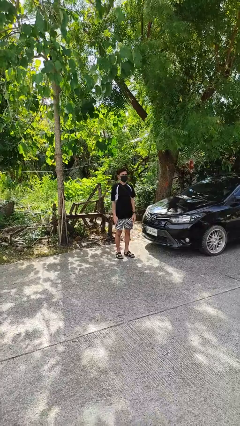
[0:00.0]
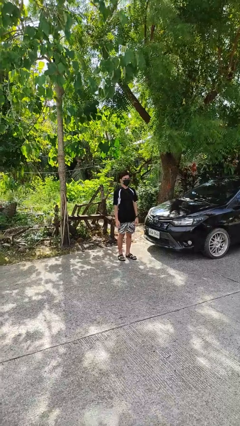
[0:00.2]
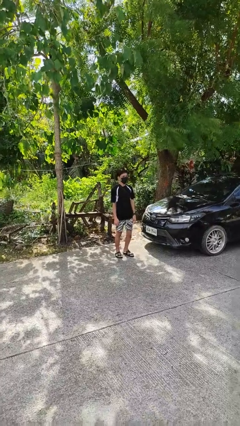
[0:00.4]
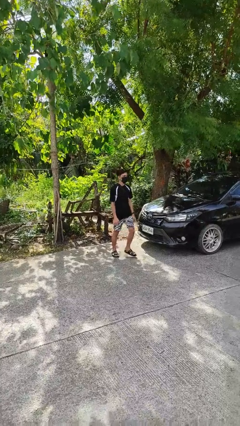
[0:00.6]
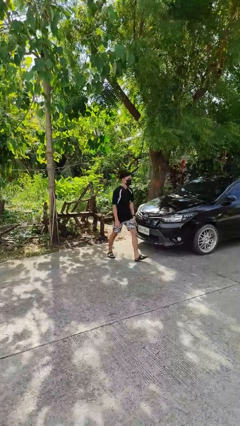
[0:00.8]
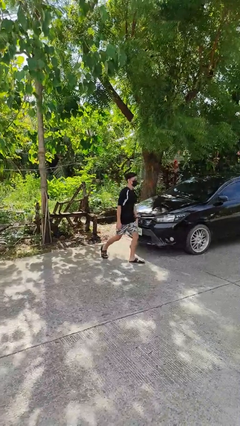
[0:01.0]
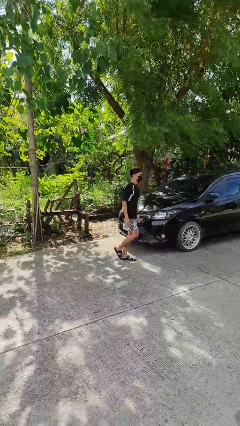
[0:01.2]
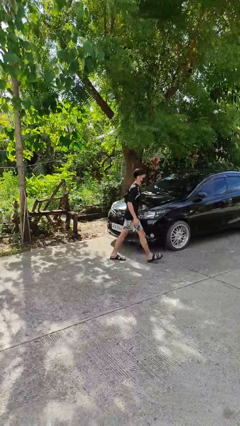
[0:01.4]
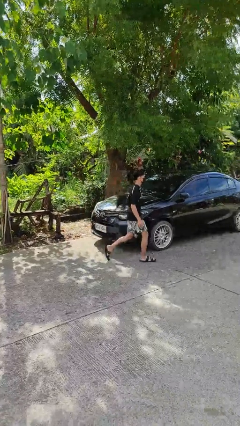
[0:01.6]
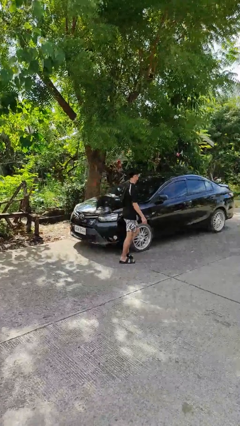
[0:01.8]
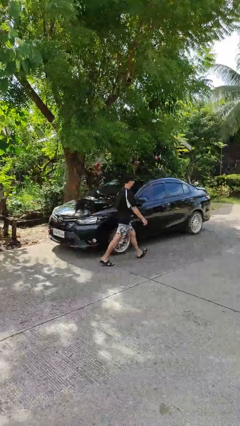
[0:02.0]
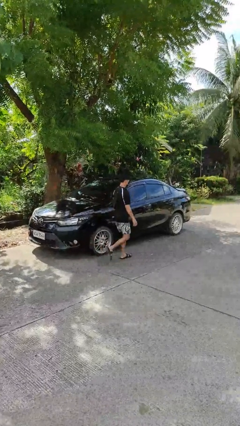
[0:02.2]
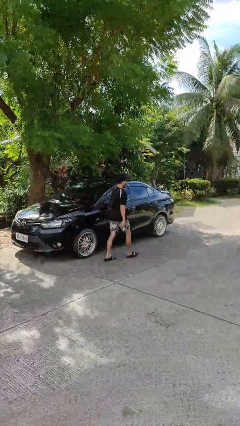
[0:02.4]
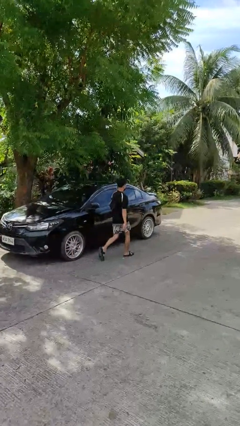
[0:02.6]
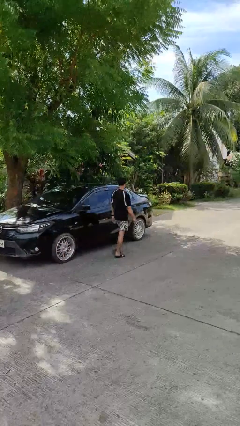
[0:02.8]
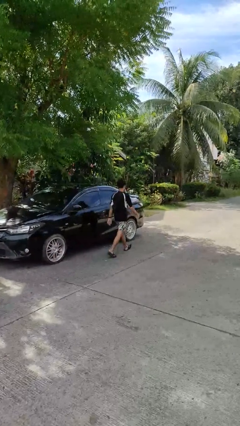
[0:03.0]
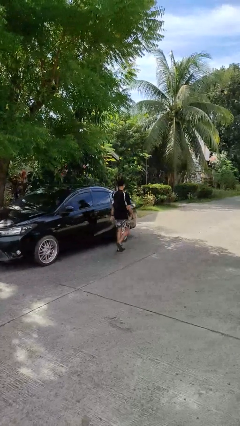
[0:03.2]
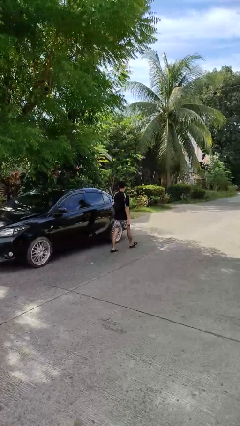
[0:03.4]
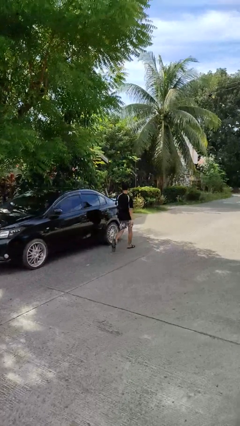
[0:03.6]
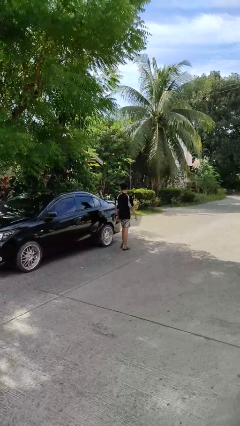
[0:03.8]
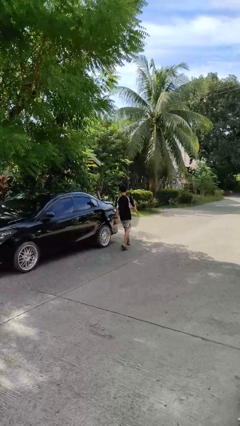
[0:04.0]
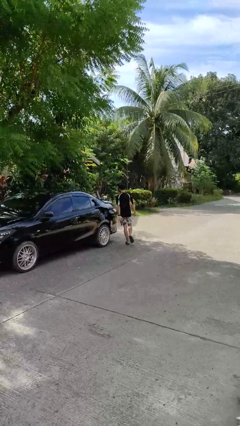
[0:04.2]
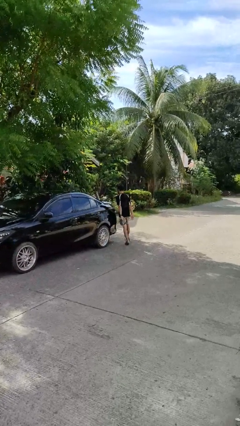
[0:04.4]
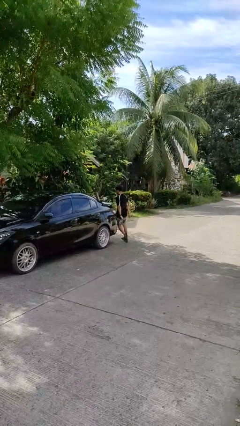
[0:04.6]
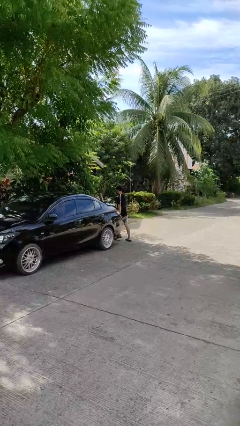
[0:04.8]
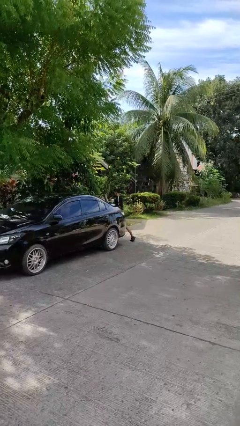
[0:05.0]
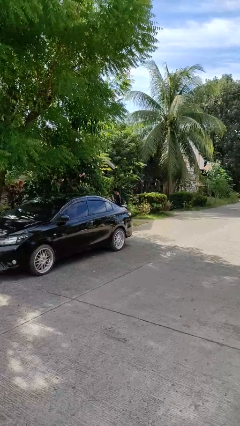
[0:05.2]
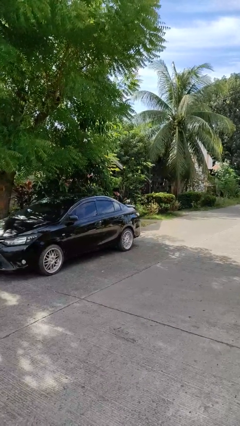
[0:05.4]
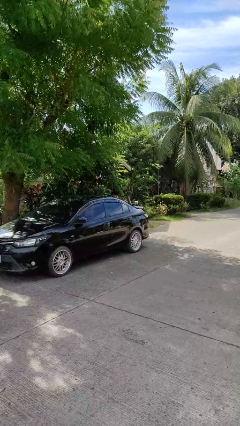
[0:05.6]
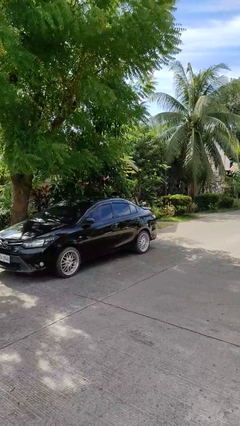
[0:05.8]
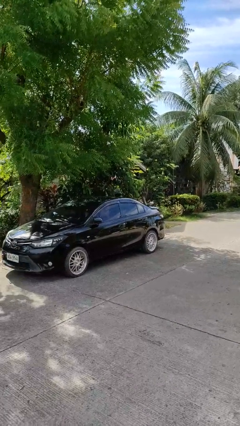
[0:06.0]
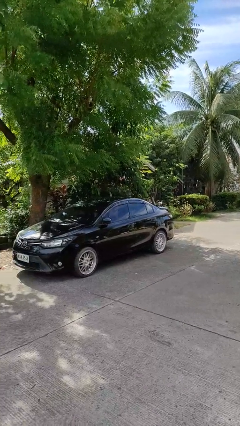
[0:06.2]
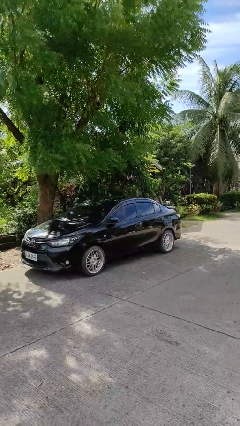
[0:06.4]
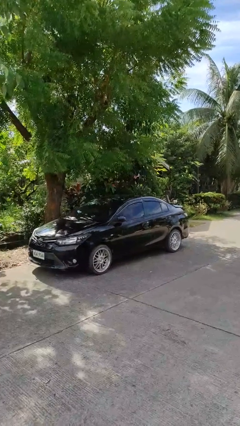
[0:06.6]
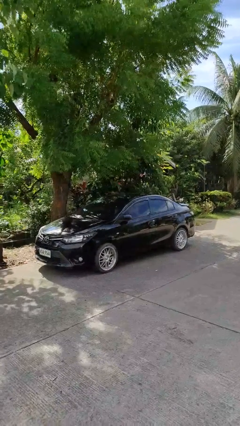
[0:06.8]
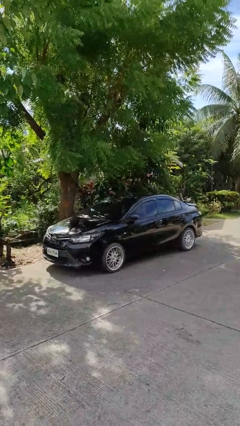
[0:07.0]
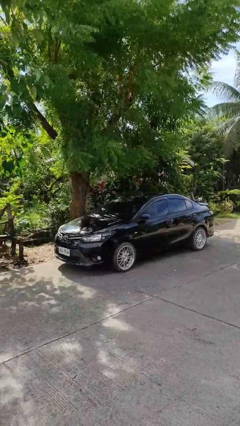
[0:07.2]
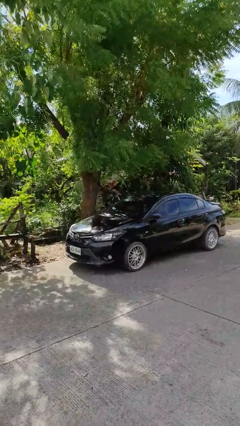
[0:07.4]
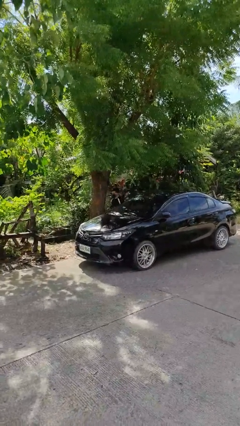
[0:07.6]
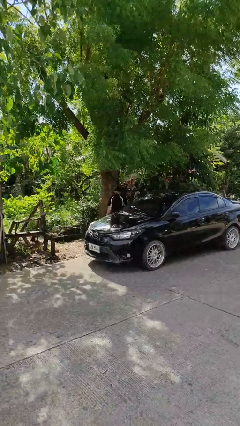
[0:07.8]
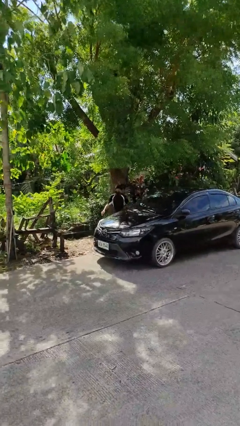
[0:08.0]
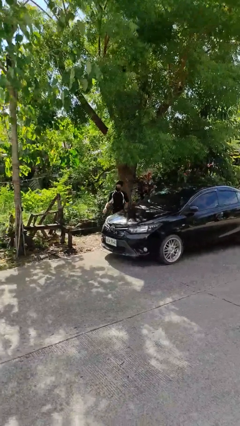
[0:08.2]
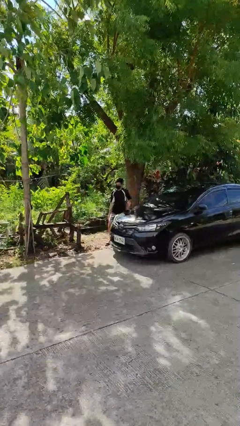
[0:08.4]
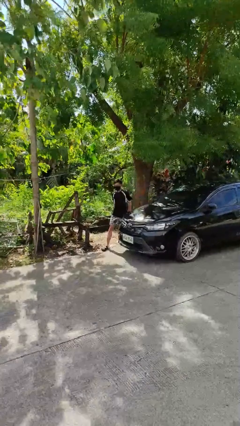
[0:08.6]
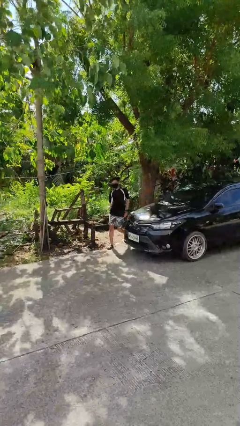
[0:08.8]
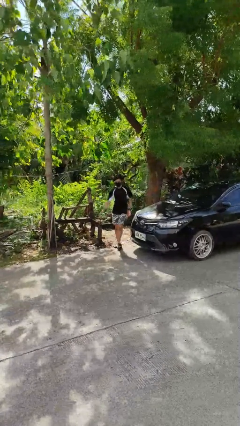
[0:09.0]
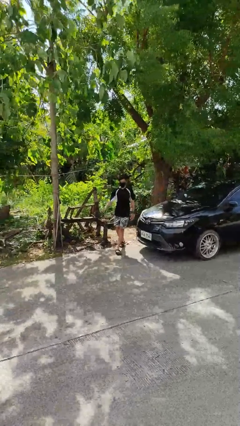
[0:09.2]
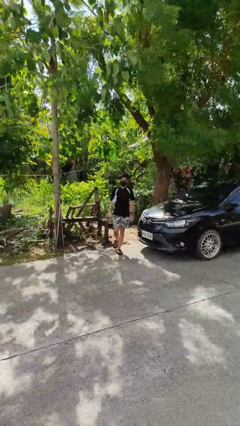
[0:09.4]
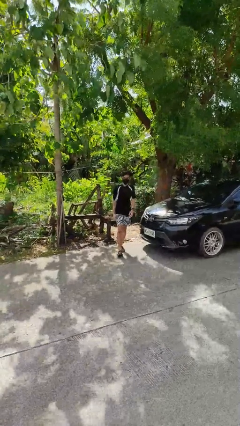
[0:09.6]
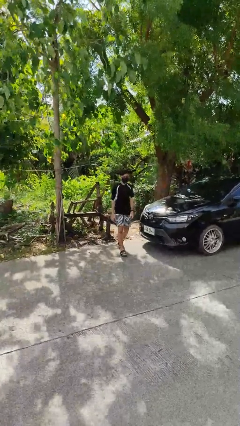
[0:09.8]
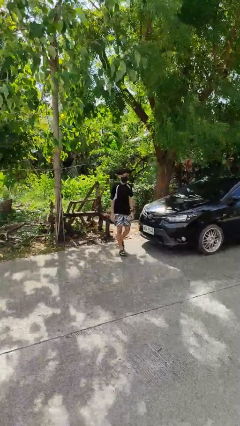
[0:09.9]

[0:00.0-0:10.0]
person walks around car

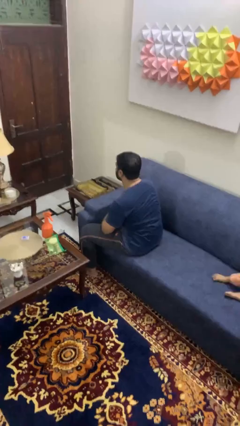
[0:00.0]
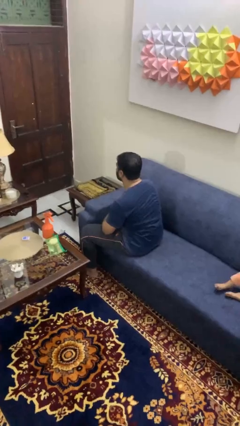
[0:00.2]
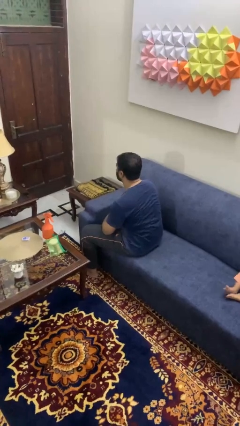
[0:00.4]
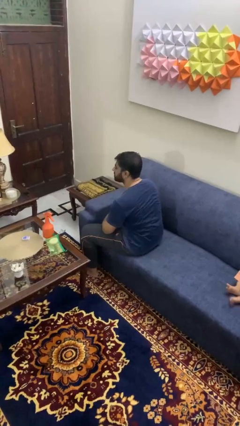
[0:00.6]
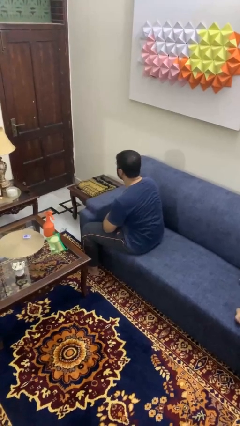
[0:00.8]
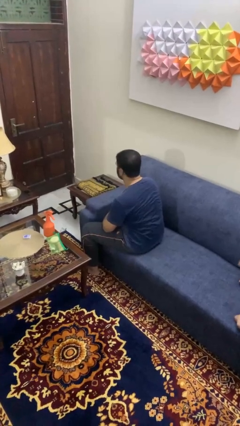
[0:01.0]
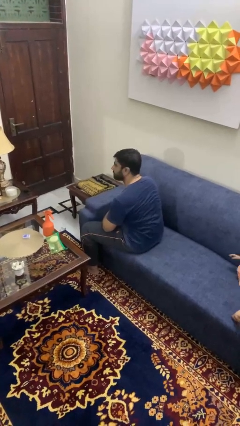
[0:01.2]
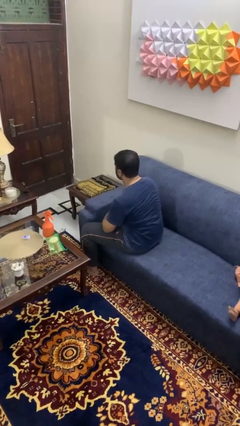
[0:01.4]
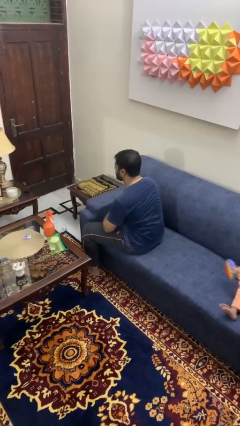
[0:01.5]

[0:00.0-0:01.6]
person shakes head

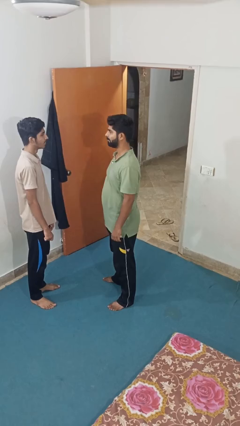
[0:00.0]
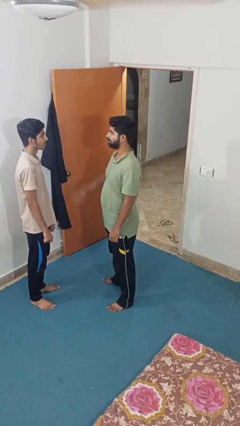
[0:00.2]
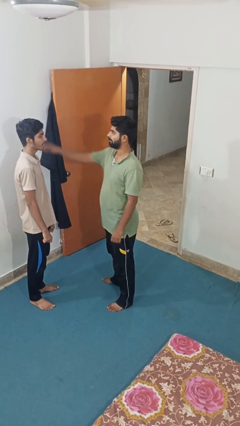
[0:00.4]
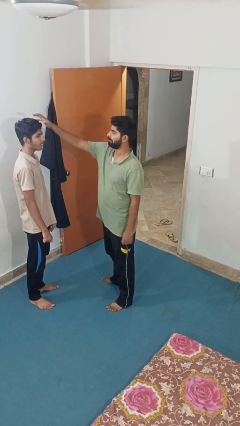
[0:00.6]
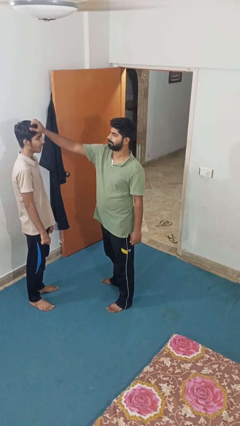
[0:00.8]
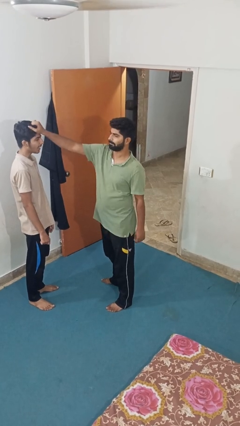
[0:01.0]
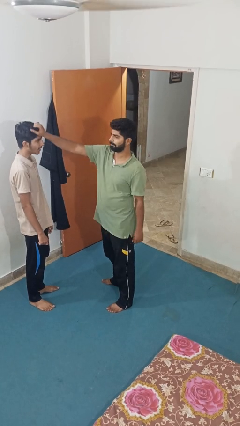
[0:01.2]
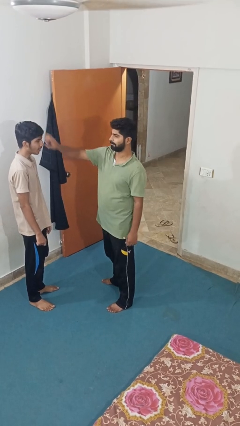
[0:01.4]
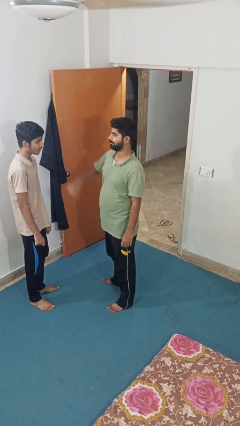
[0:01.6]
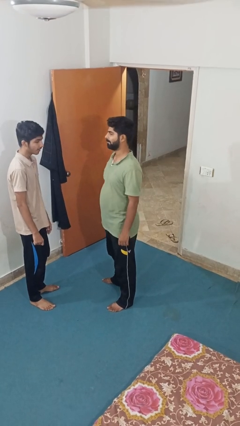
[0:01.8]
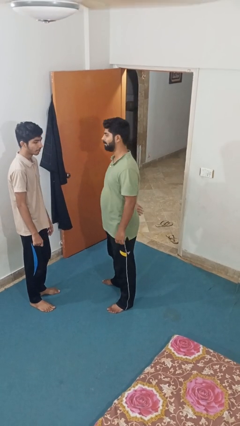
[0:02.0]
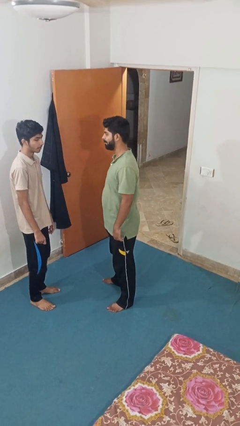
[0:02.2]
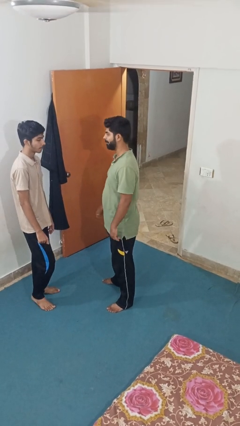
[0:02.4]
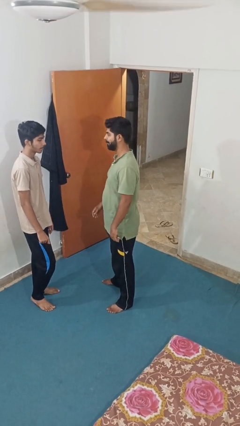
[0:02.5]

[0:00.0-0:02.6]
person grabs person by hair

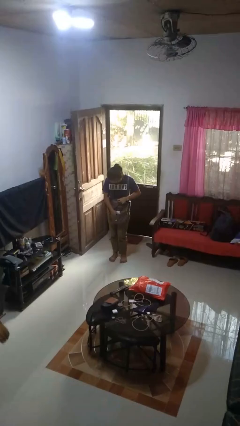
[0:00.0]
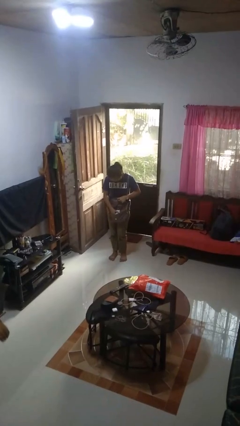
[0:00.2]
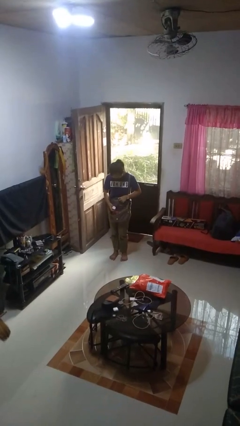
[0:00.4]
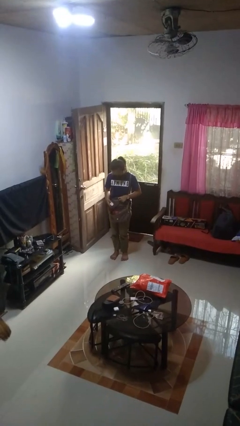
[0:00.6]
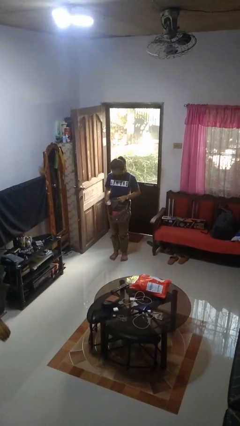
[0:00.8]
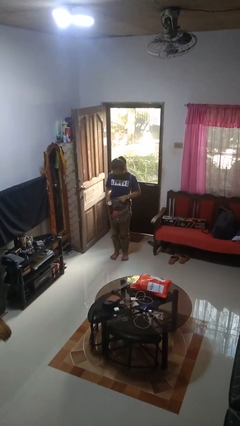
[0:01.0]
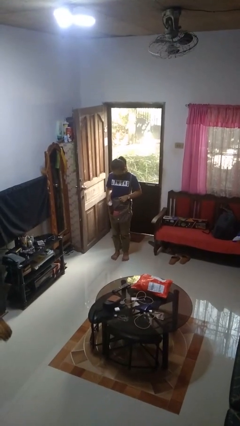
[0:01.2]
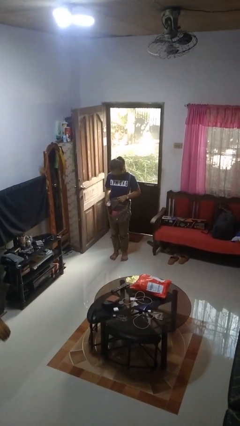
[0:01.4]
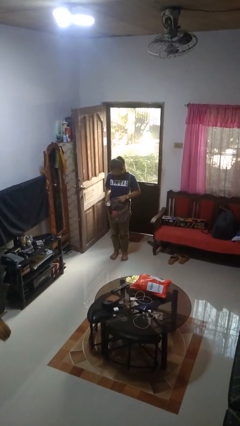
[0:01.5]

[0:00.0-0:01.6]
person takes object from purse

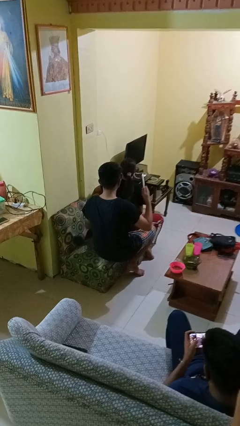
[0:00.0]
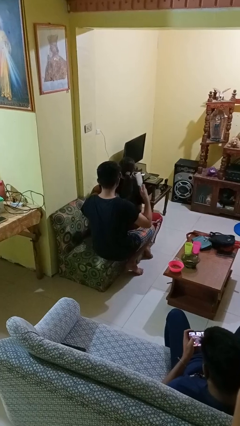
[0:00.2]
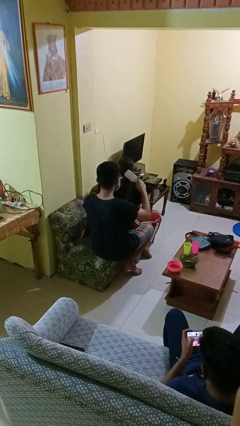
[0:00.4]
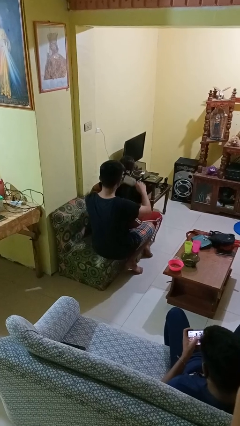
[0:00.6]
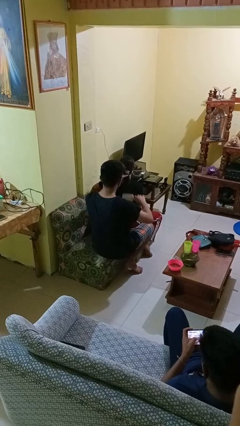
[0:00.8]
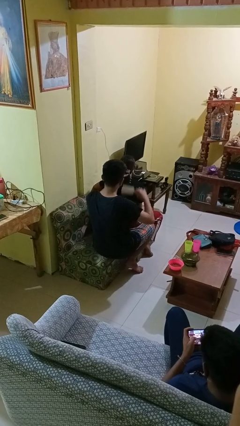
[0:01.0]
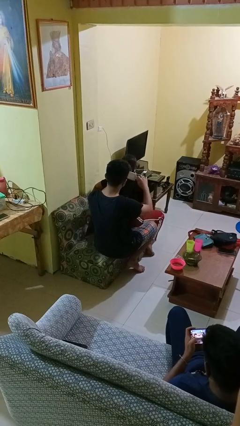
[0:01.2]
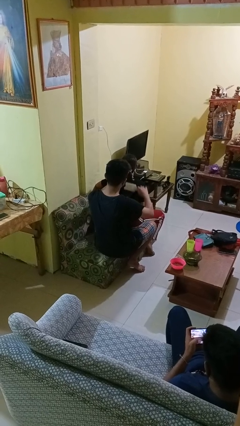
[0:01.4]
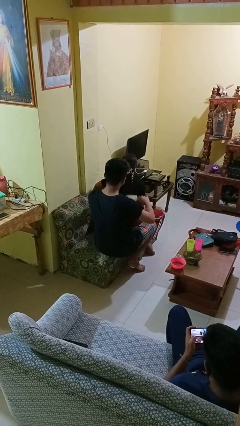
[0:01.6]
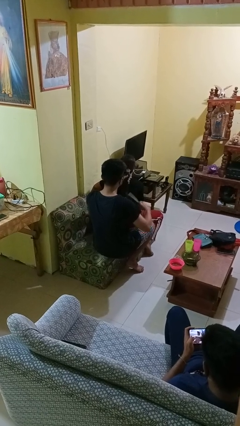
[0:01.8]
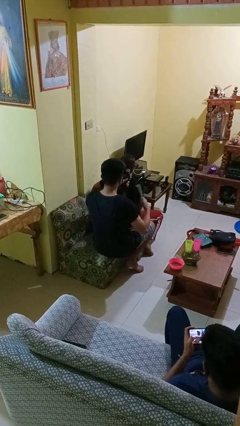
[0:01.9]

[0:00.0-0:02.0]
person brushes hair of person
